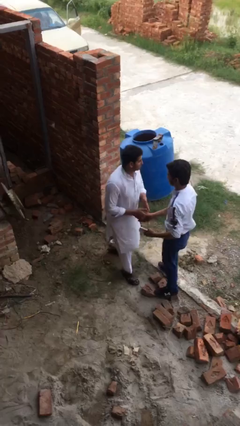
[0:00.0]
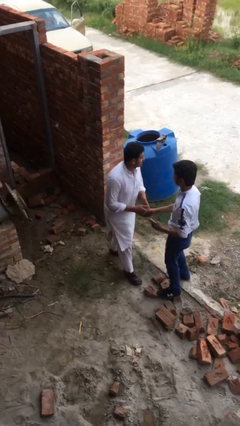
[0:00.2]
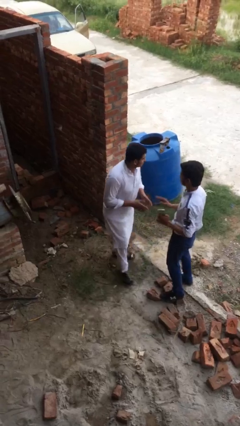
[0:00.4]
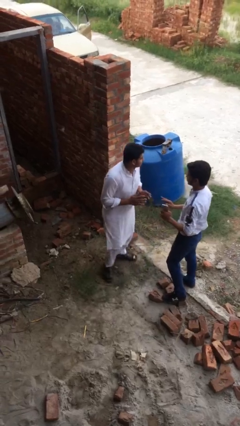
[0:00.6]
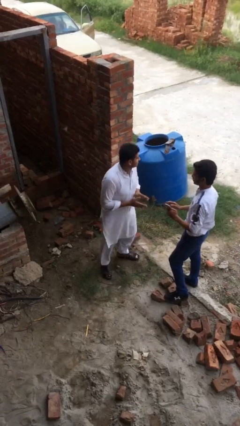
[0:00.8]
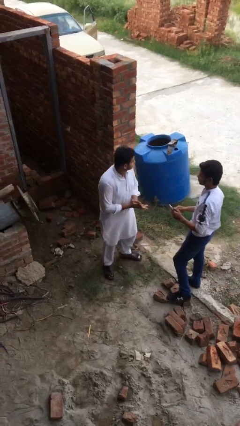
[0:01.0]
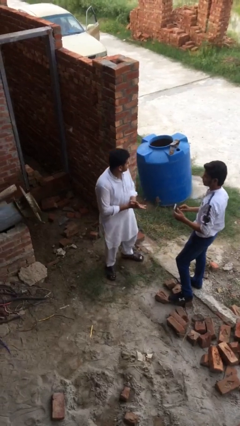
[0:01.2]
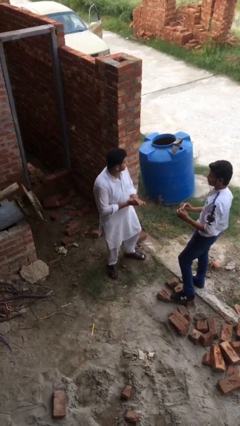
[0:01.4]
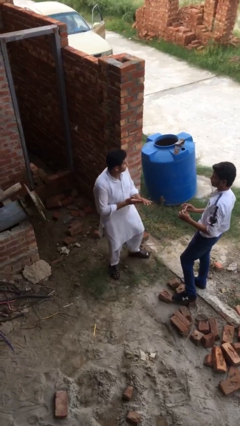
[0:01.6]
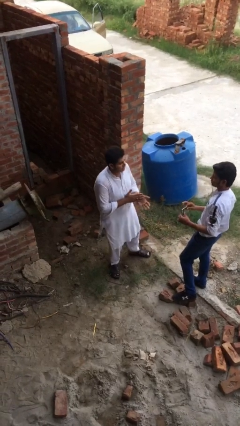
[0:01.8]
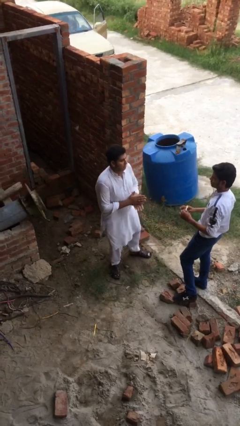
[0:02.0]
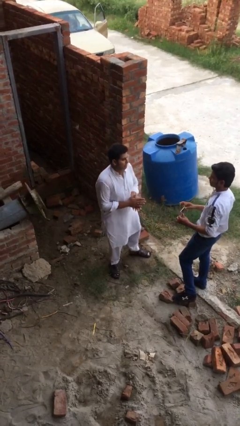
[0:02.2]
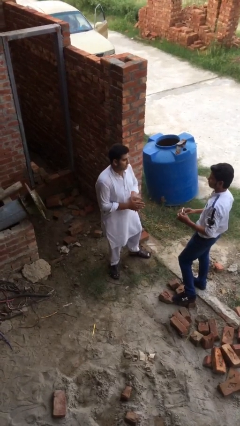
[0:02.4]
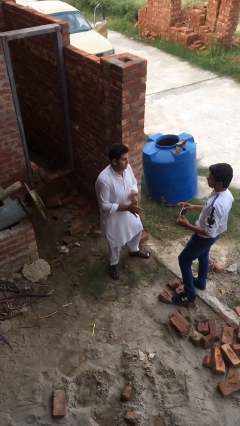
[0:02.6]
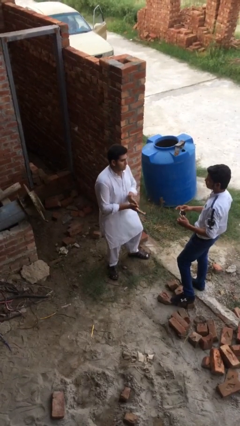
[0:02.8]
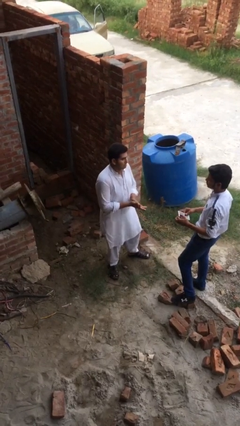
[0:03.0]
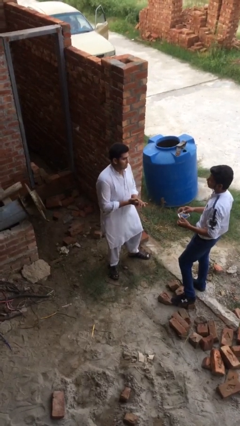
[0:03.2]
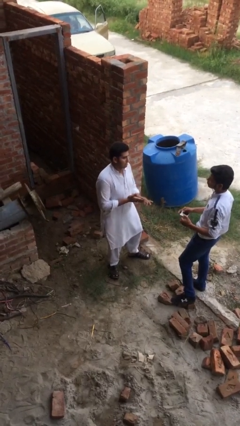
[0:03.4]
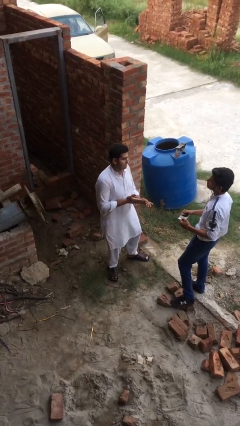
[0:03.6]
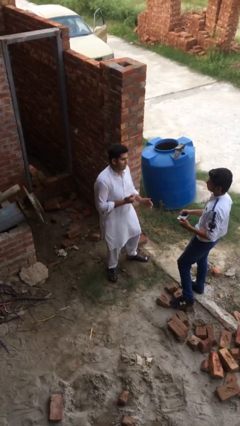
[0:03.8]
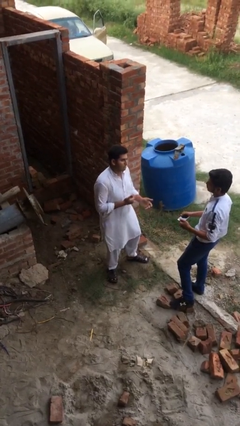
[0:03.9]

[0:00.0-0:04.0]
person talks to person

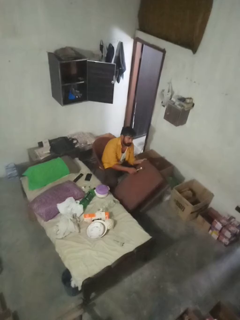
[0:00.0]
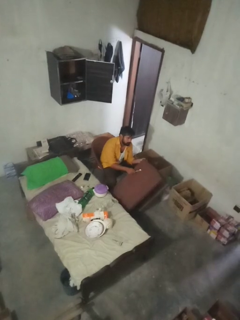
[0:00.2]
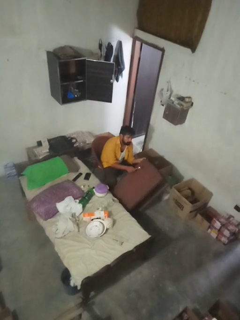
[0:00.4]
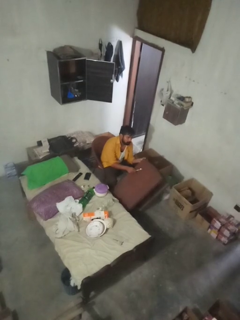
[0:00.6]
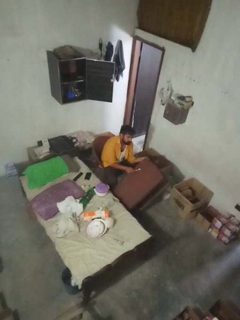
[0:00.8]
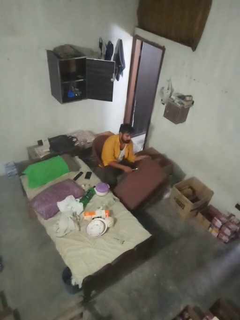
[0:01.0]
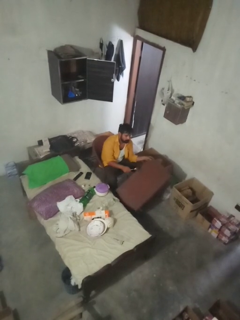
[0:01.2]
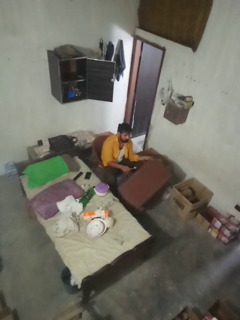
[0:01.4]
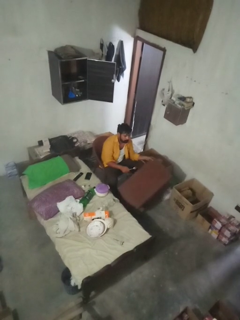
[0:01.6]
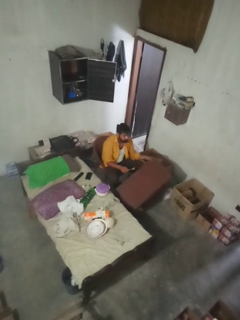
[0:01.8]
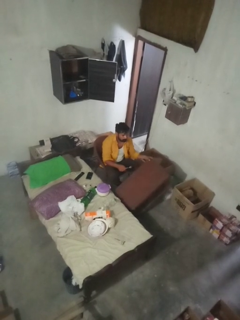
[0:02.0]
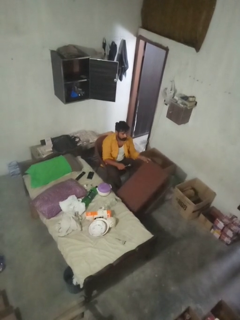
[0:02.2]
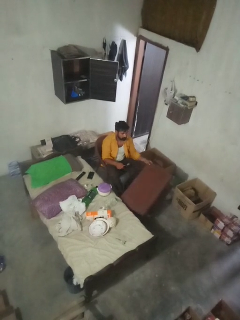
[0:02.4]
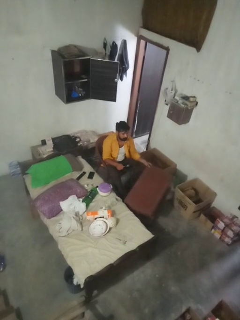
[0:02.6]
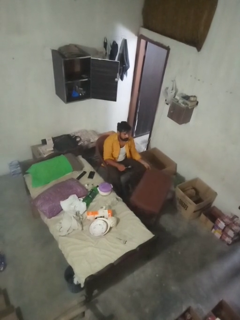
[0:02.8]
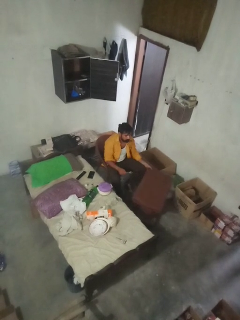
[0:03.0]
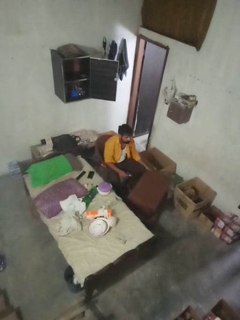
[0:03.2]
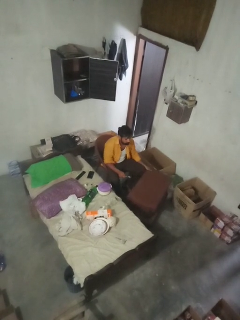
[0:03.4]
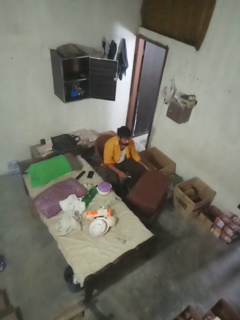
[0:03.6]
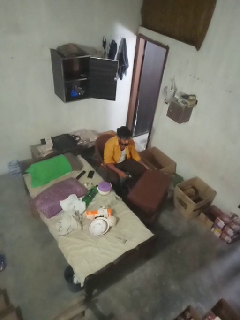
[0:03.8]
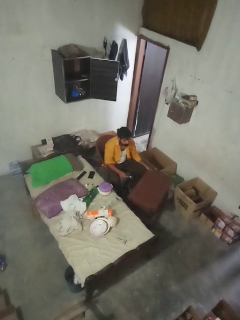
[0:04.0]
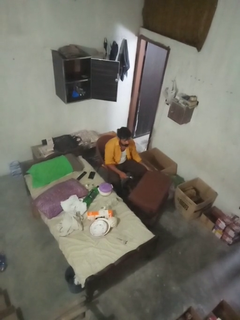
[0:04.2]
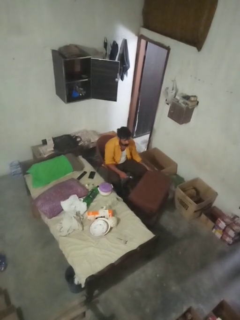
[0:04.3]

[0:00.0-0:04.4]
person sets upright furniture

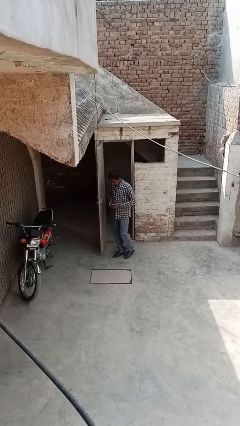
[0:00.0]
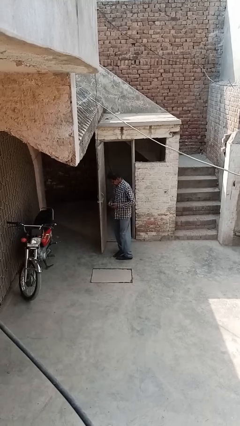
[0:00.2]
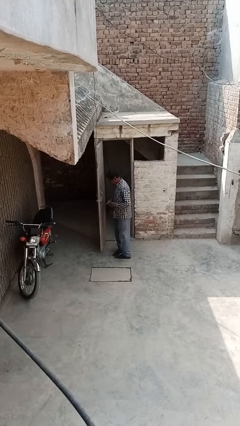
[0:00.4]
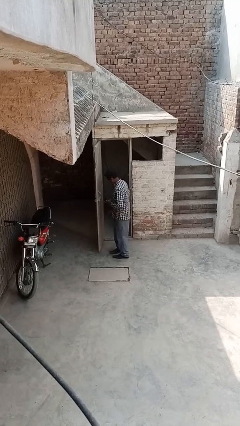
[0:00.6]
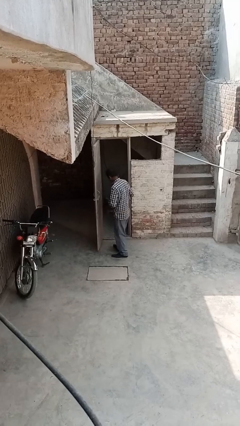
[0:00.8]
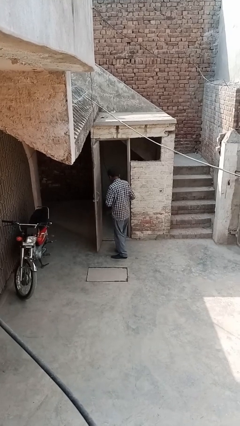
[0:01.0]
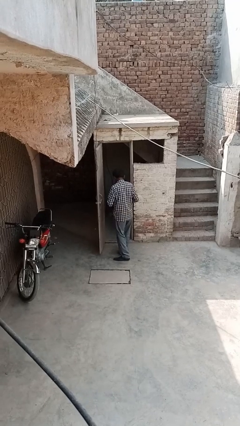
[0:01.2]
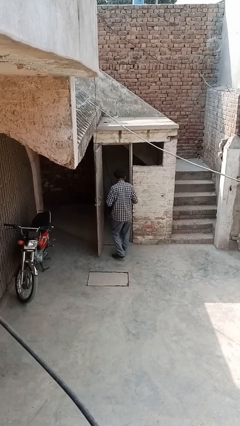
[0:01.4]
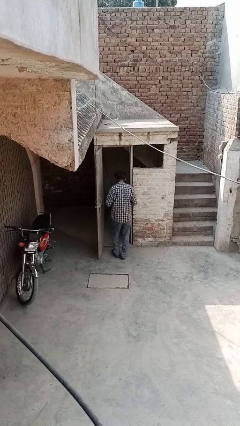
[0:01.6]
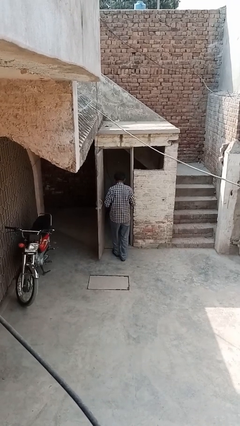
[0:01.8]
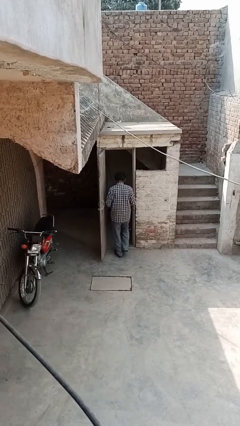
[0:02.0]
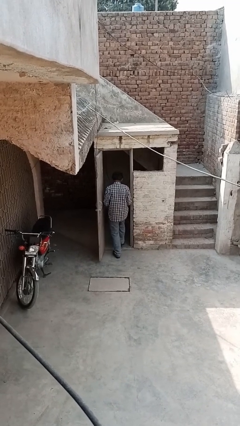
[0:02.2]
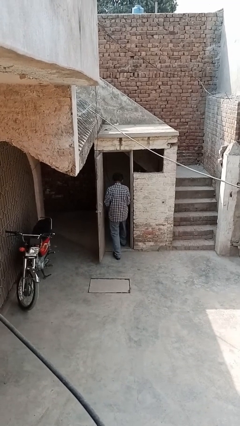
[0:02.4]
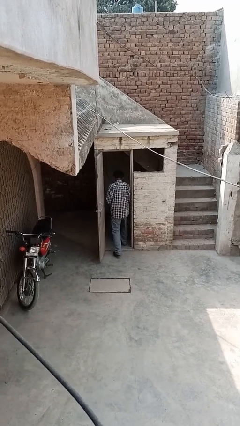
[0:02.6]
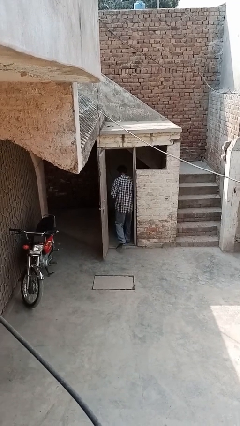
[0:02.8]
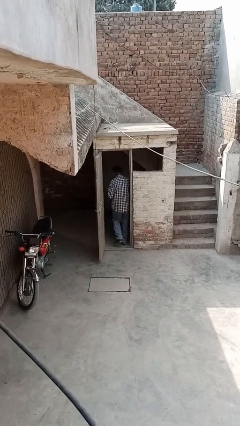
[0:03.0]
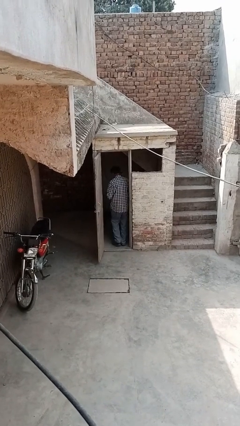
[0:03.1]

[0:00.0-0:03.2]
person exits scene through structure

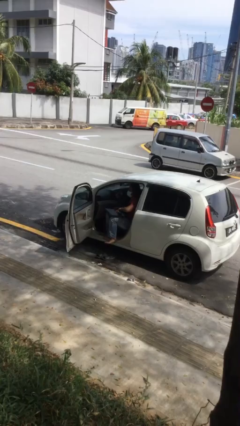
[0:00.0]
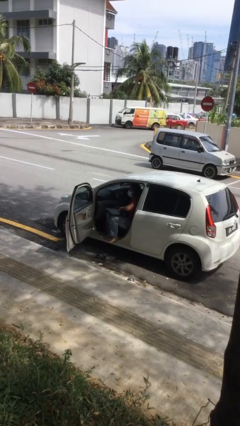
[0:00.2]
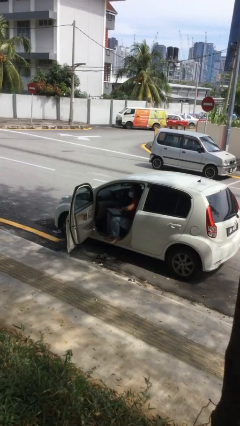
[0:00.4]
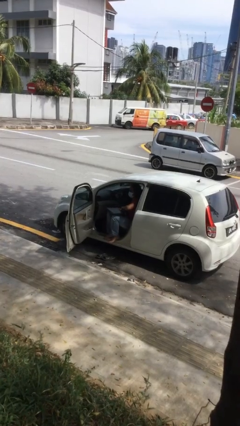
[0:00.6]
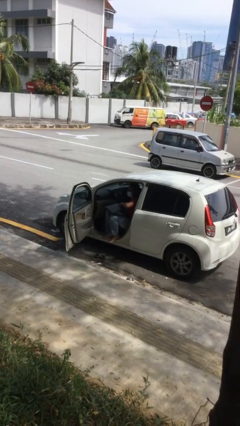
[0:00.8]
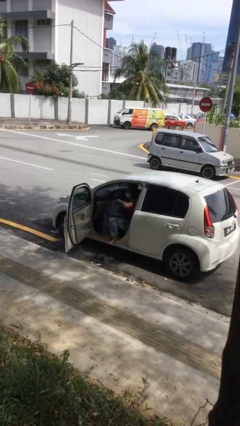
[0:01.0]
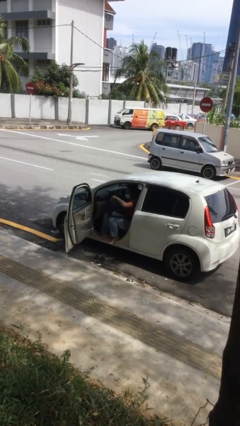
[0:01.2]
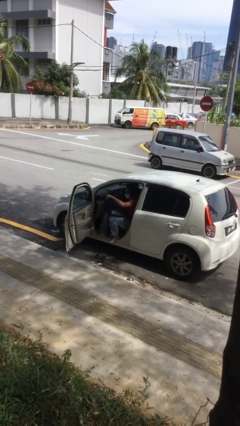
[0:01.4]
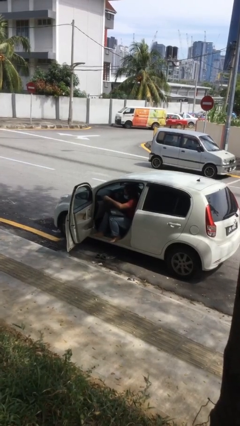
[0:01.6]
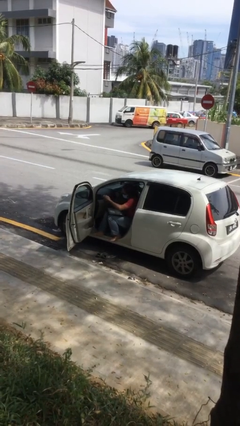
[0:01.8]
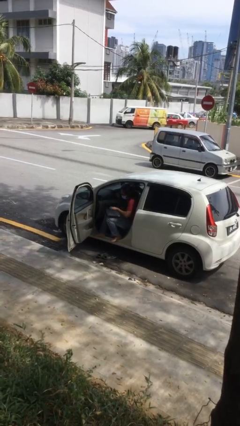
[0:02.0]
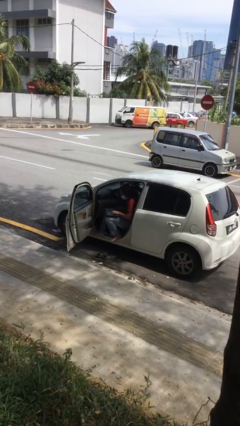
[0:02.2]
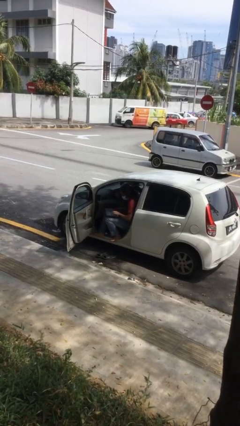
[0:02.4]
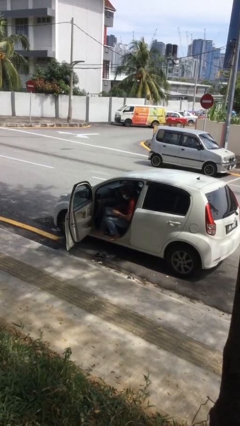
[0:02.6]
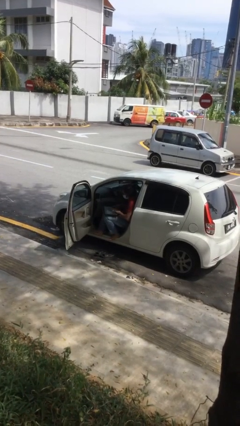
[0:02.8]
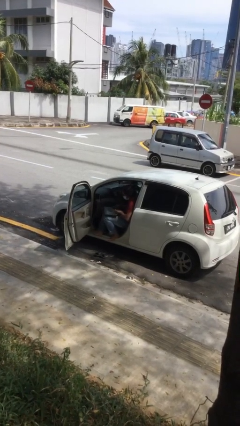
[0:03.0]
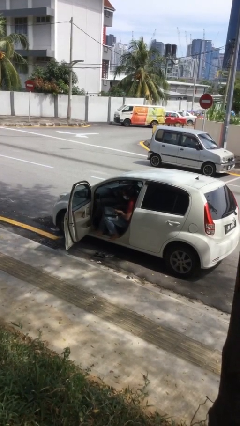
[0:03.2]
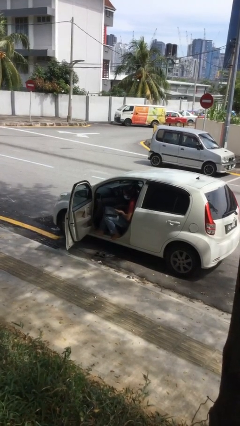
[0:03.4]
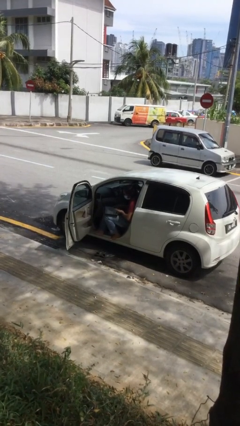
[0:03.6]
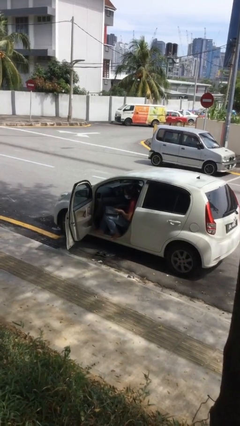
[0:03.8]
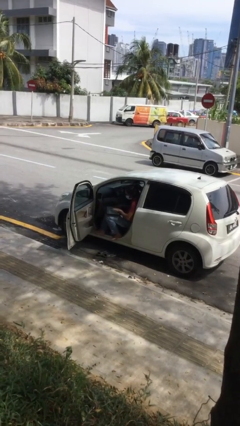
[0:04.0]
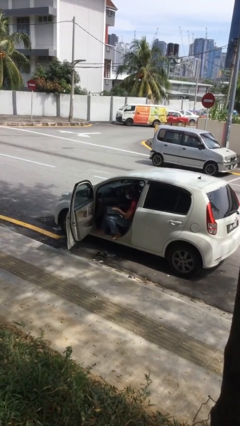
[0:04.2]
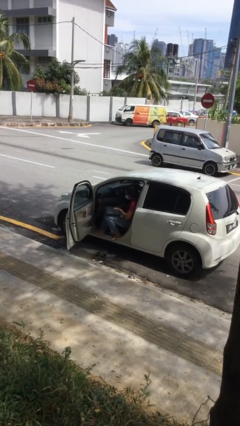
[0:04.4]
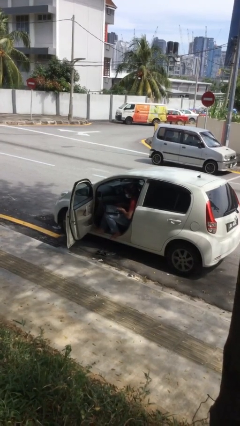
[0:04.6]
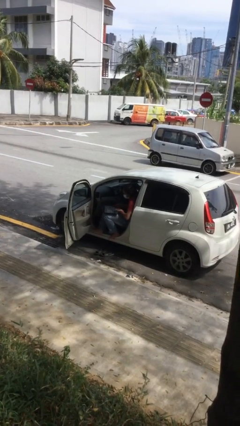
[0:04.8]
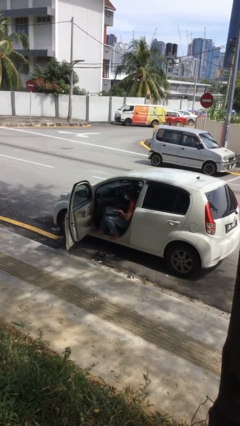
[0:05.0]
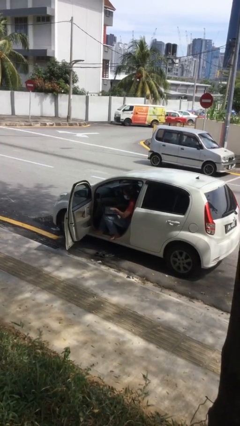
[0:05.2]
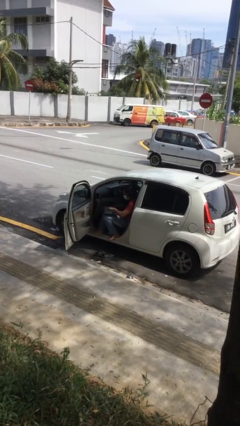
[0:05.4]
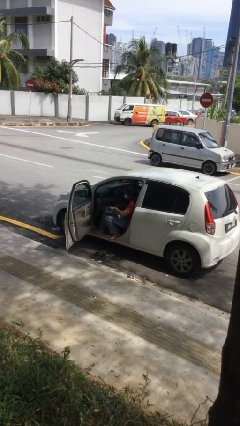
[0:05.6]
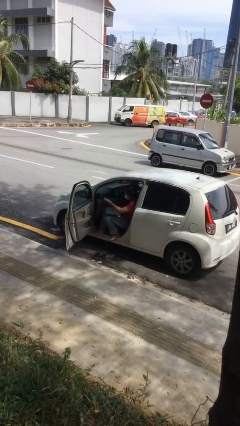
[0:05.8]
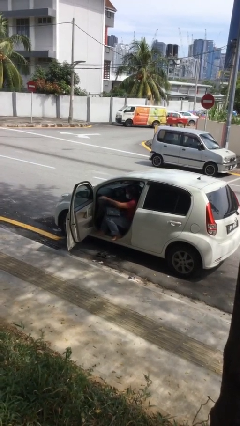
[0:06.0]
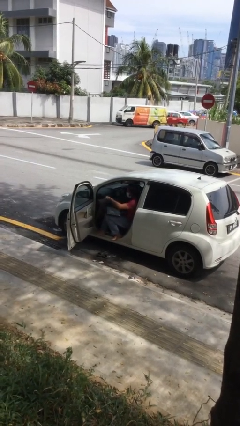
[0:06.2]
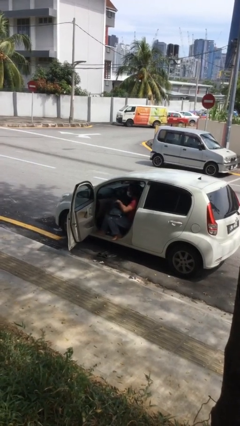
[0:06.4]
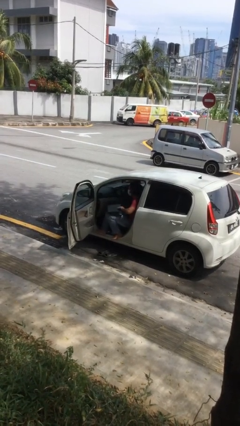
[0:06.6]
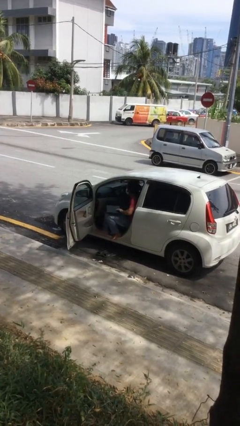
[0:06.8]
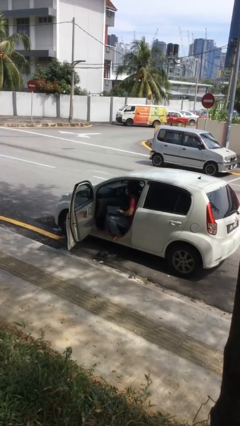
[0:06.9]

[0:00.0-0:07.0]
person interacts with laptop
